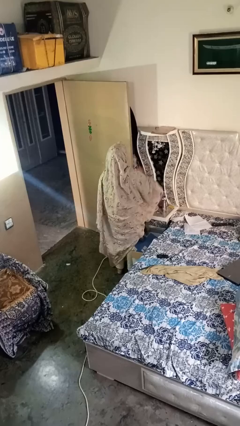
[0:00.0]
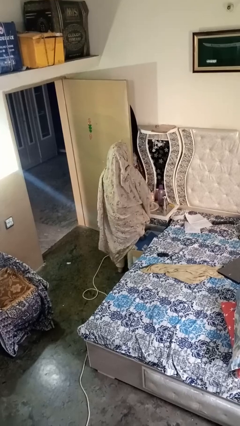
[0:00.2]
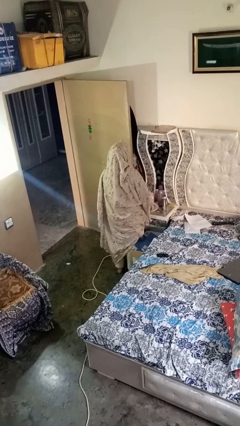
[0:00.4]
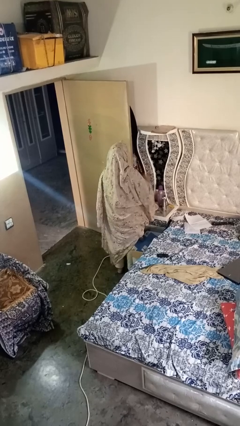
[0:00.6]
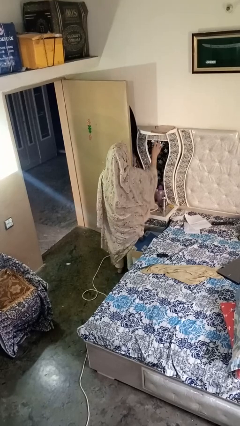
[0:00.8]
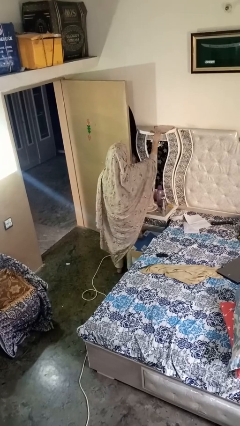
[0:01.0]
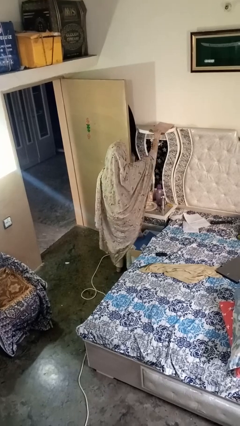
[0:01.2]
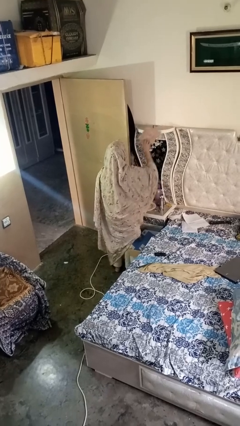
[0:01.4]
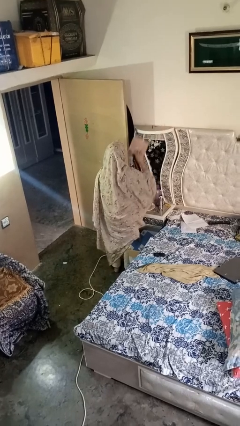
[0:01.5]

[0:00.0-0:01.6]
person picks up object from shelf

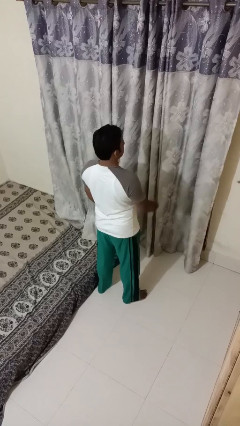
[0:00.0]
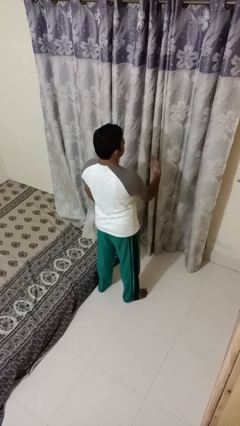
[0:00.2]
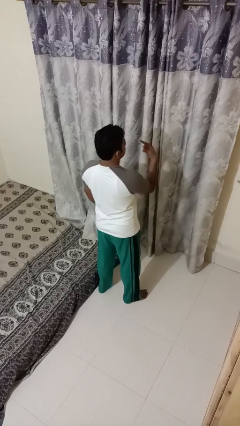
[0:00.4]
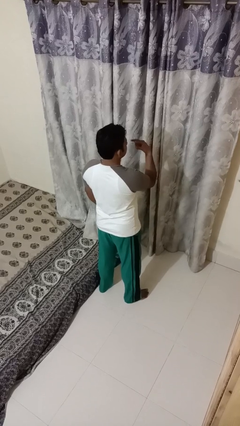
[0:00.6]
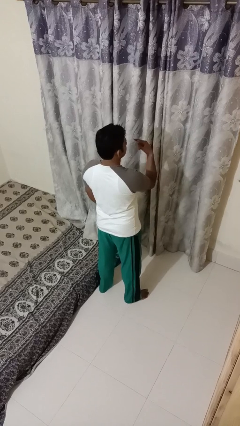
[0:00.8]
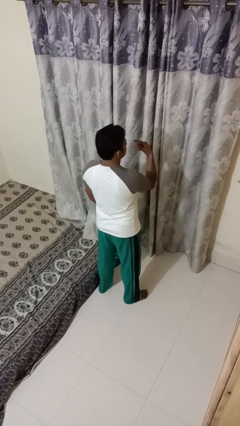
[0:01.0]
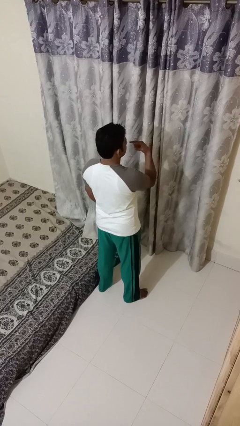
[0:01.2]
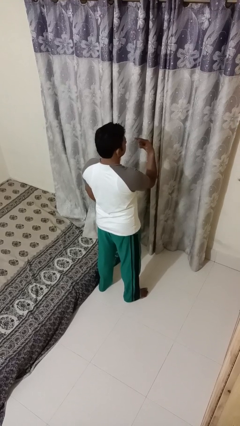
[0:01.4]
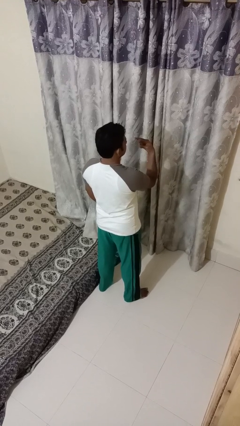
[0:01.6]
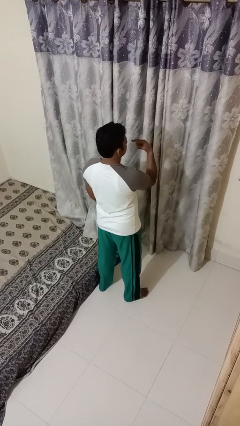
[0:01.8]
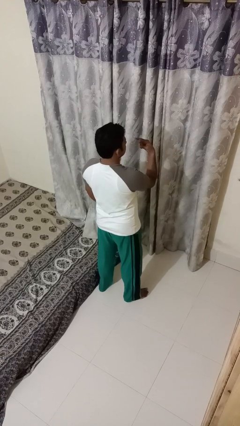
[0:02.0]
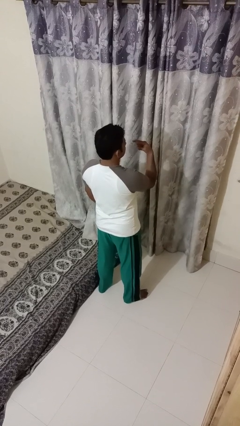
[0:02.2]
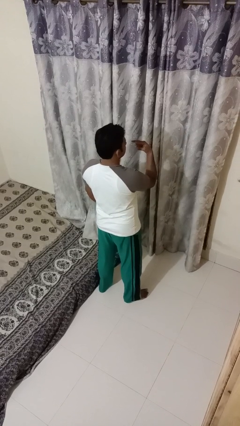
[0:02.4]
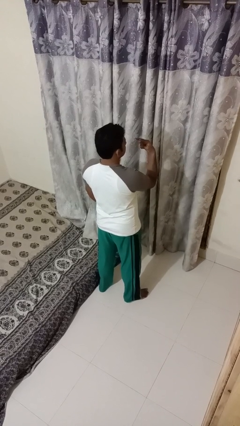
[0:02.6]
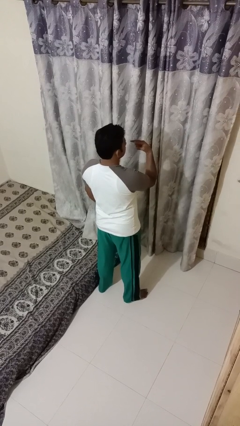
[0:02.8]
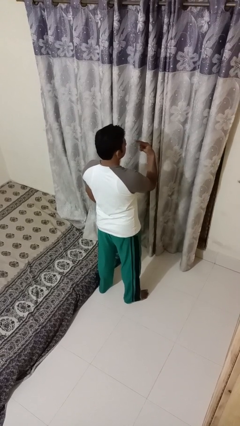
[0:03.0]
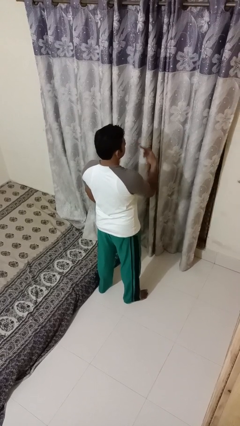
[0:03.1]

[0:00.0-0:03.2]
person gestures watch closely

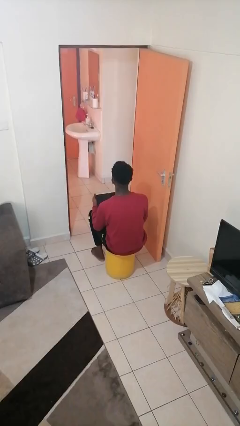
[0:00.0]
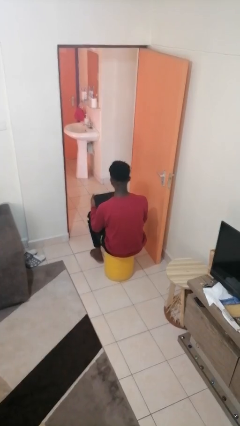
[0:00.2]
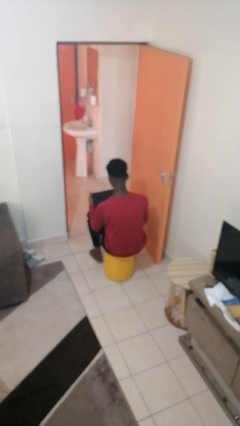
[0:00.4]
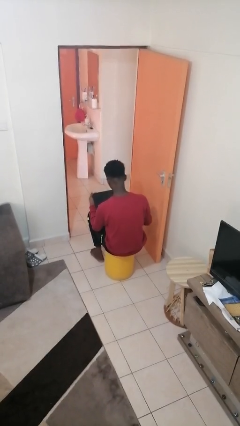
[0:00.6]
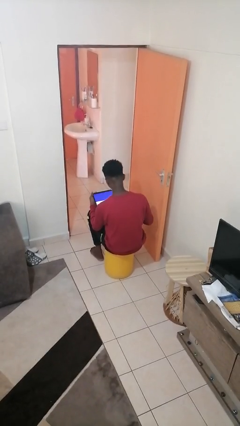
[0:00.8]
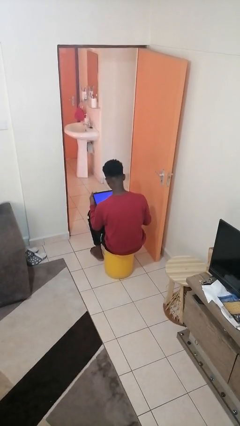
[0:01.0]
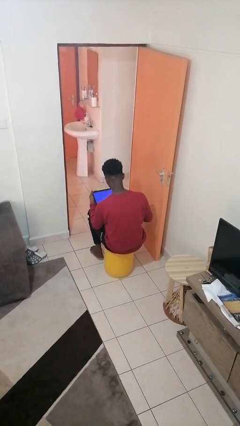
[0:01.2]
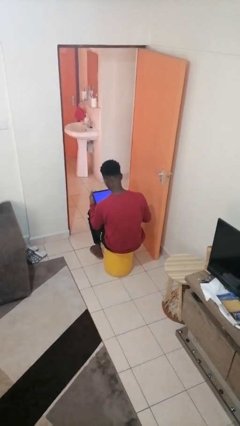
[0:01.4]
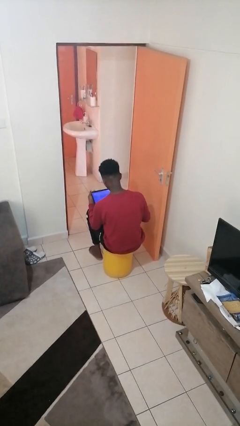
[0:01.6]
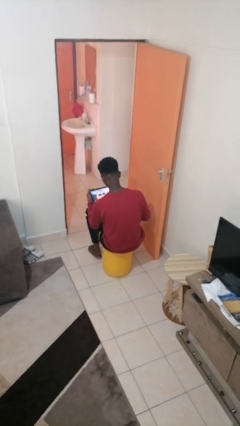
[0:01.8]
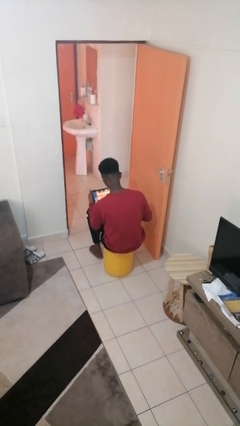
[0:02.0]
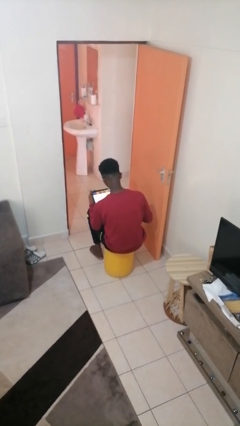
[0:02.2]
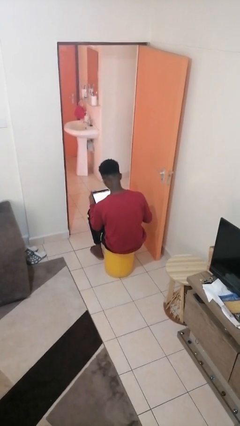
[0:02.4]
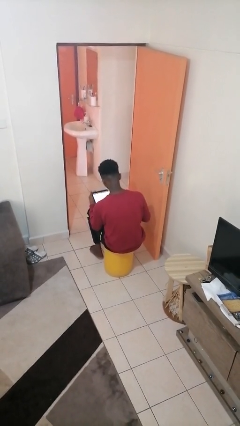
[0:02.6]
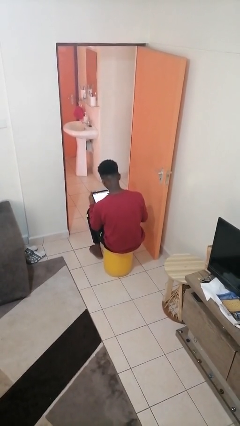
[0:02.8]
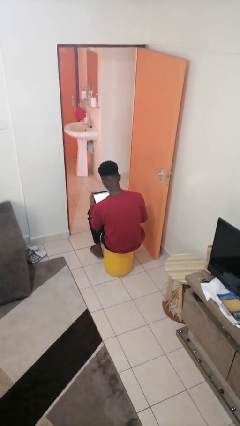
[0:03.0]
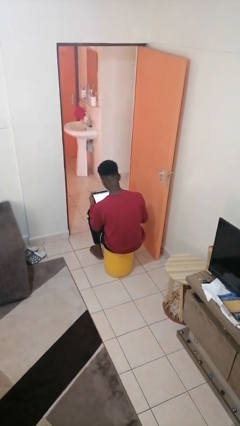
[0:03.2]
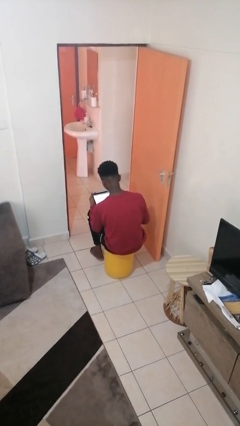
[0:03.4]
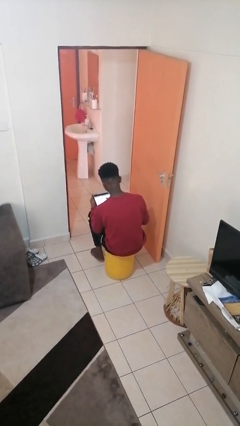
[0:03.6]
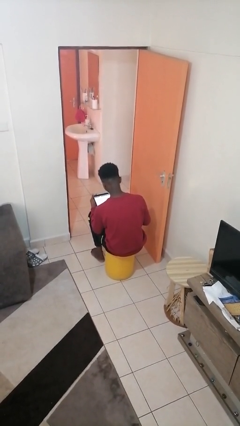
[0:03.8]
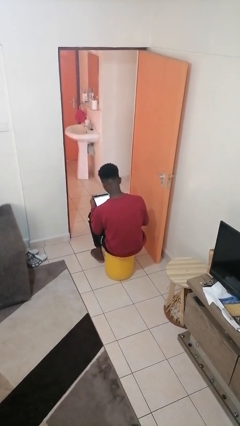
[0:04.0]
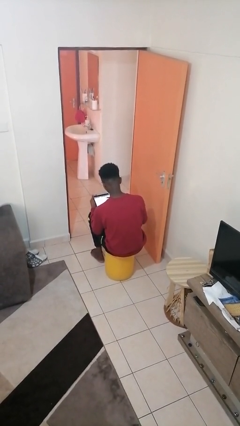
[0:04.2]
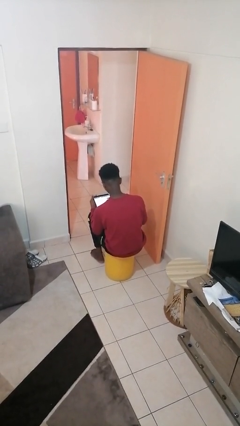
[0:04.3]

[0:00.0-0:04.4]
person interacts with tablet

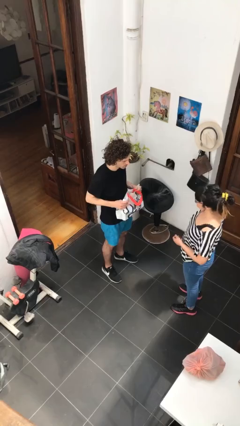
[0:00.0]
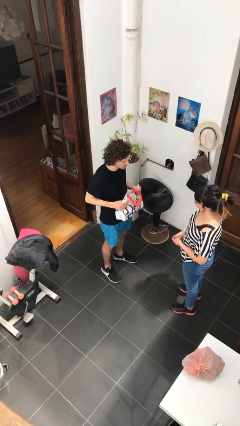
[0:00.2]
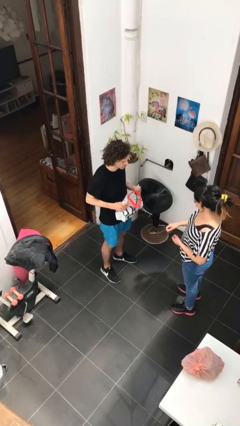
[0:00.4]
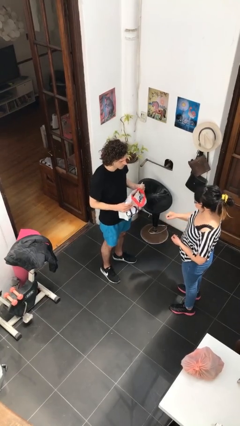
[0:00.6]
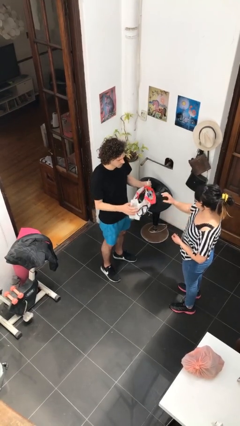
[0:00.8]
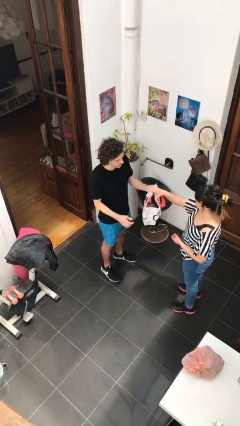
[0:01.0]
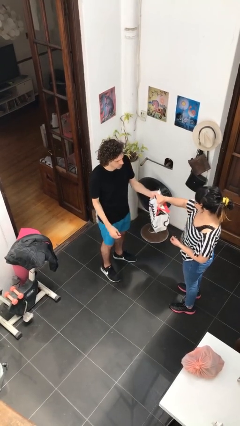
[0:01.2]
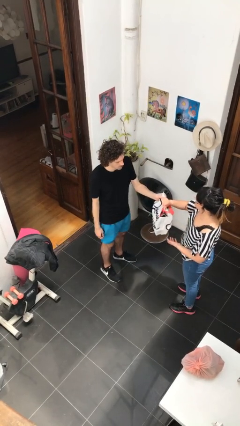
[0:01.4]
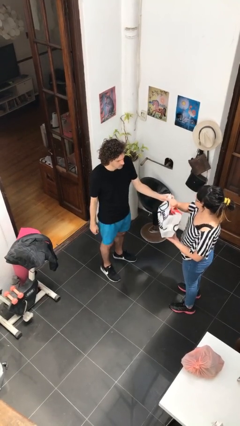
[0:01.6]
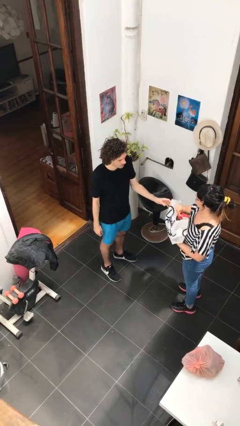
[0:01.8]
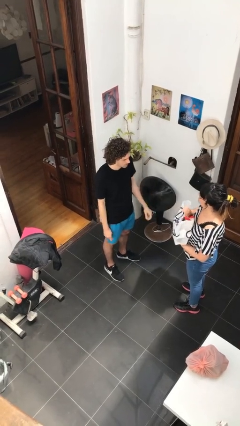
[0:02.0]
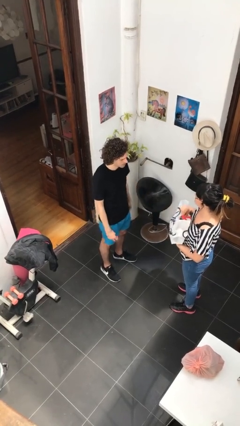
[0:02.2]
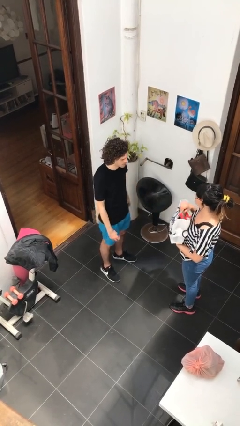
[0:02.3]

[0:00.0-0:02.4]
person transfers object to person

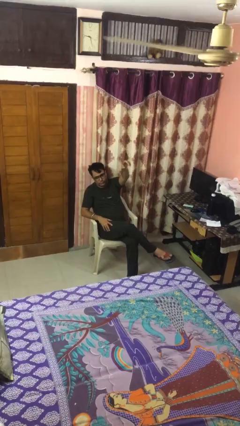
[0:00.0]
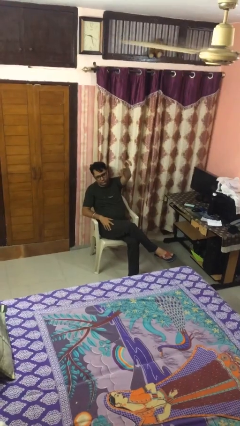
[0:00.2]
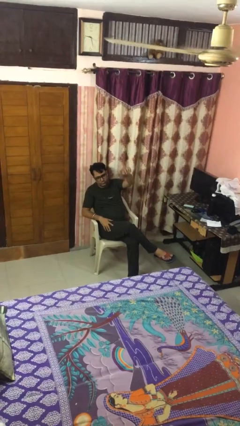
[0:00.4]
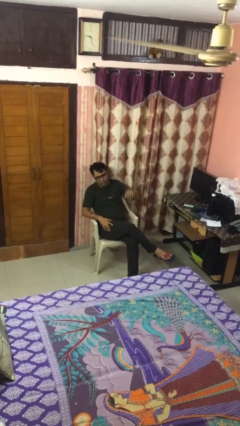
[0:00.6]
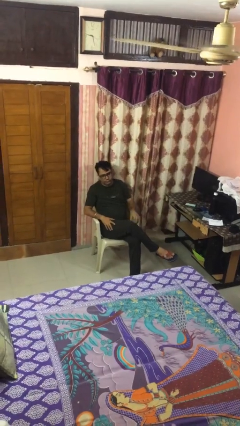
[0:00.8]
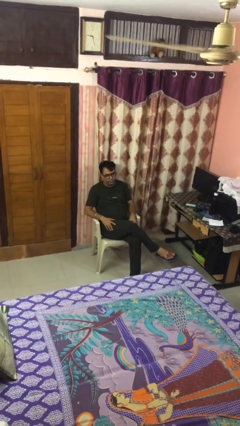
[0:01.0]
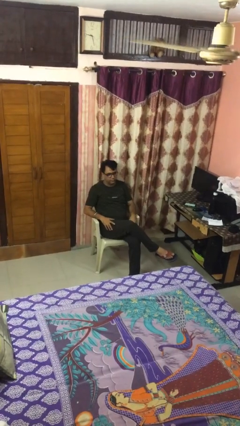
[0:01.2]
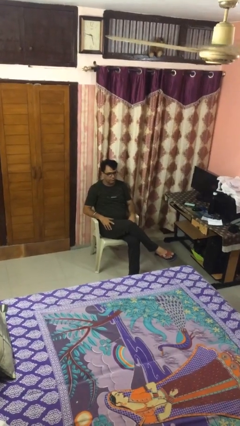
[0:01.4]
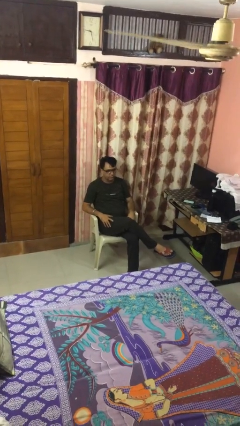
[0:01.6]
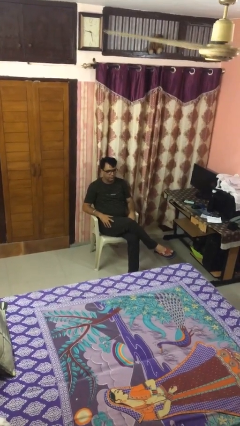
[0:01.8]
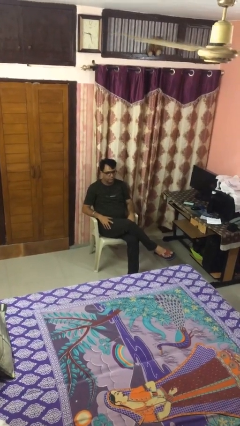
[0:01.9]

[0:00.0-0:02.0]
person gestures lower hand

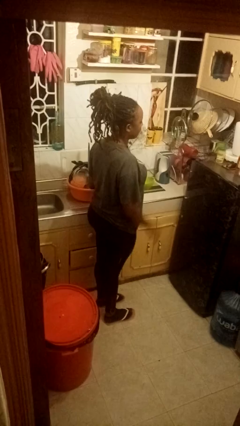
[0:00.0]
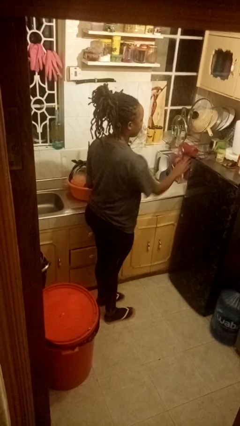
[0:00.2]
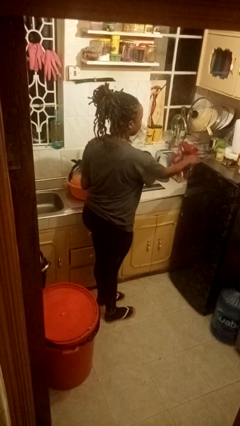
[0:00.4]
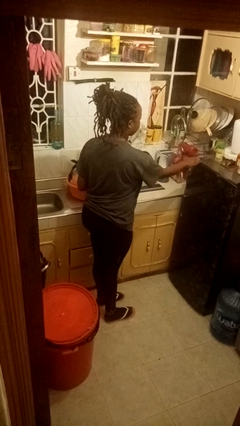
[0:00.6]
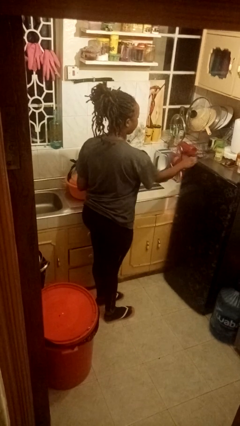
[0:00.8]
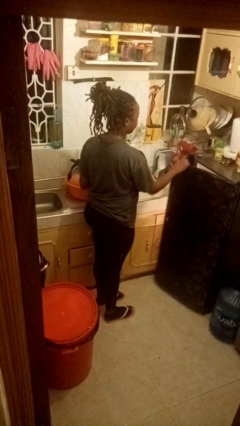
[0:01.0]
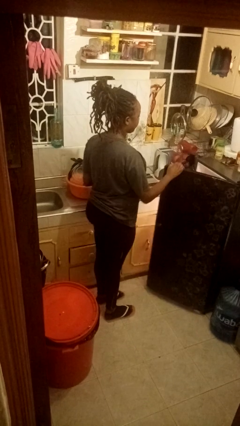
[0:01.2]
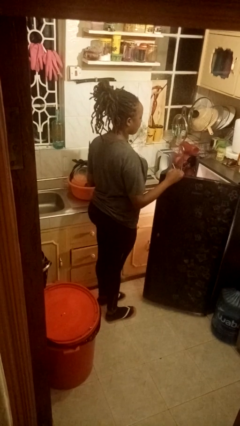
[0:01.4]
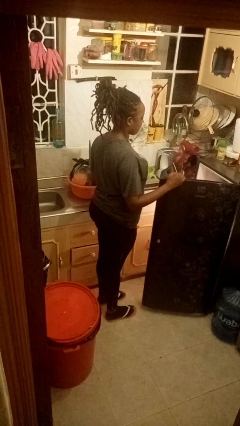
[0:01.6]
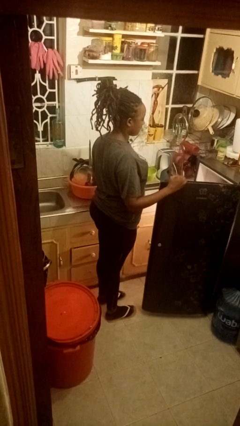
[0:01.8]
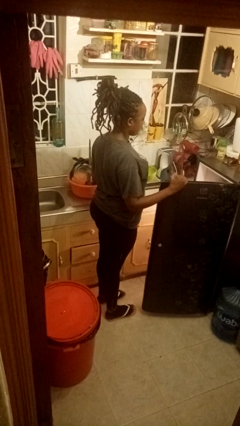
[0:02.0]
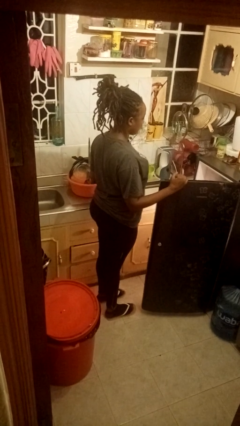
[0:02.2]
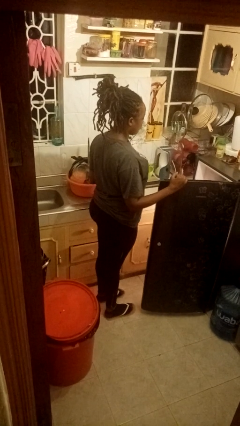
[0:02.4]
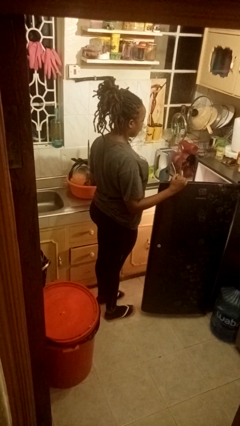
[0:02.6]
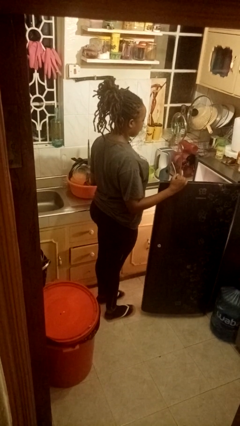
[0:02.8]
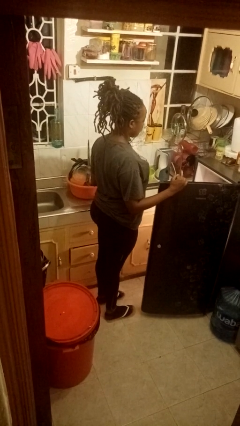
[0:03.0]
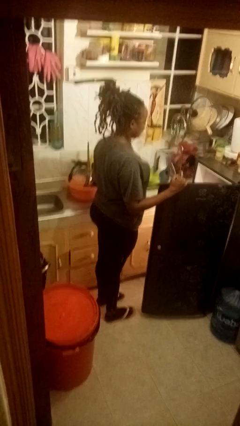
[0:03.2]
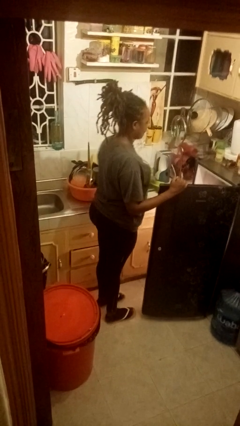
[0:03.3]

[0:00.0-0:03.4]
person opens refrigerator

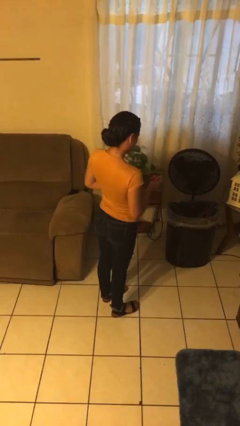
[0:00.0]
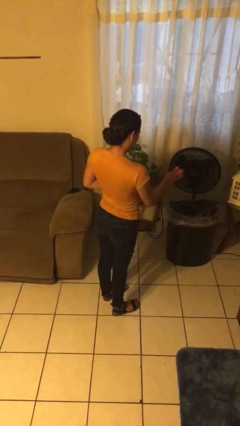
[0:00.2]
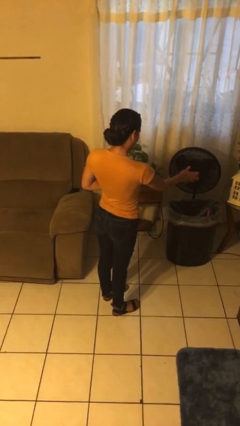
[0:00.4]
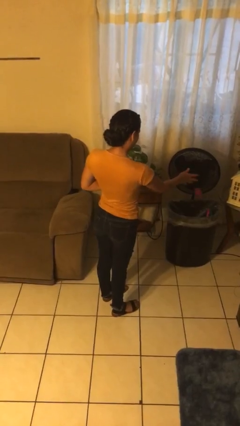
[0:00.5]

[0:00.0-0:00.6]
person discards trash
